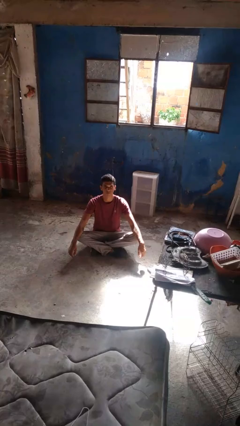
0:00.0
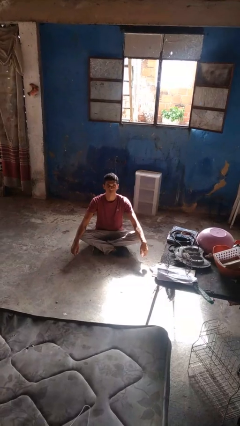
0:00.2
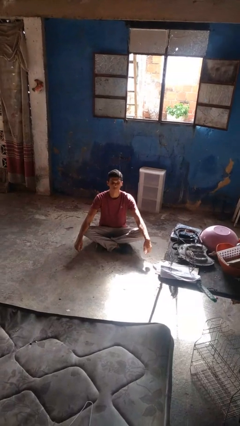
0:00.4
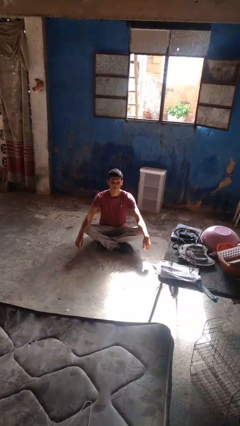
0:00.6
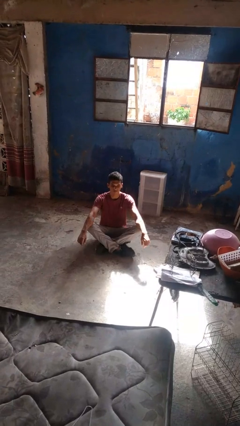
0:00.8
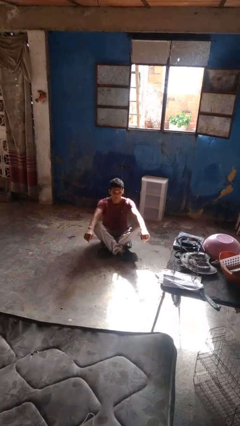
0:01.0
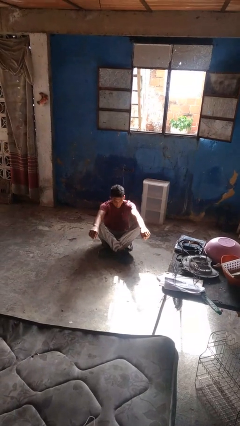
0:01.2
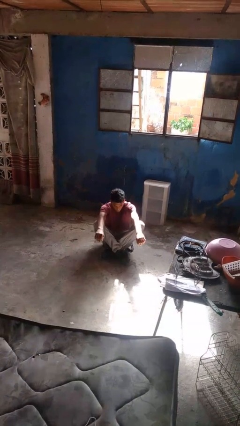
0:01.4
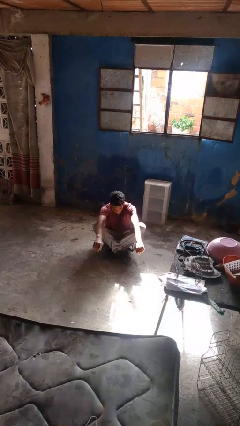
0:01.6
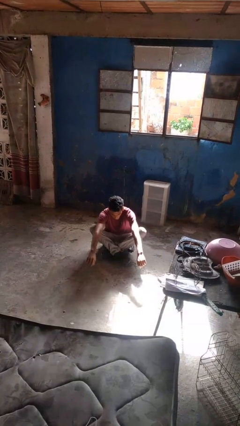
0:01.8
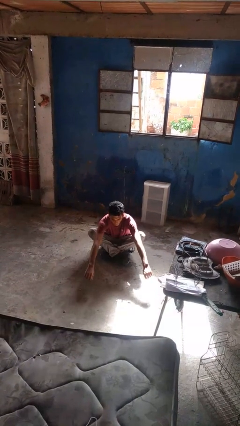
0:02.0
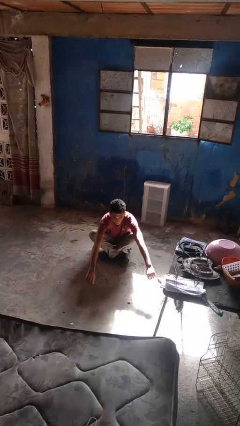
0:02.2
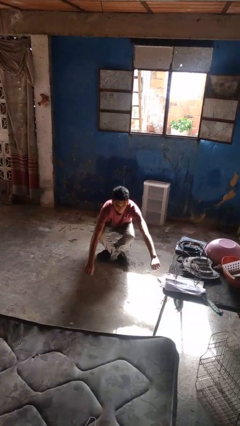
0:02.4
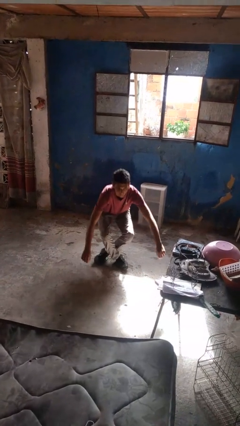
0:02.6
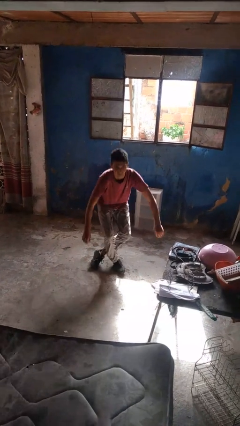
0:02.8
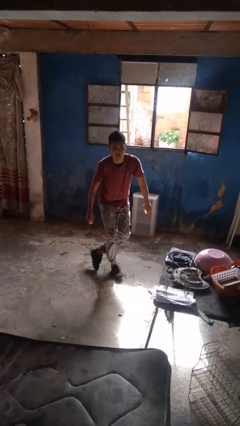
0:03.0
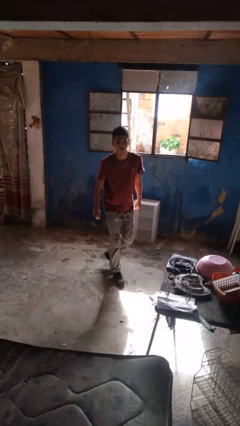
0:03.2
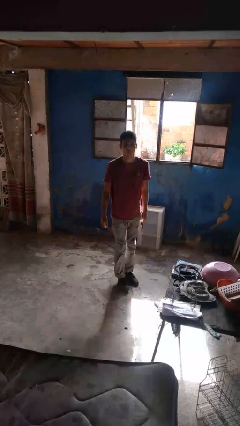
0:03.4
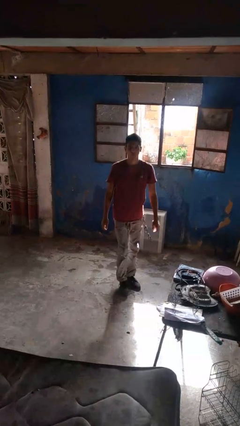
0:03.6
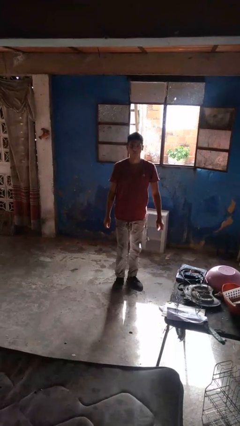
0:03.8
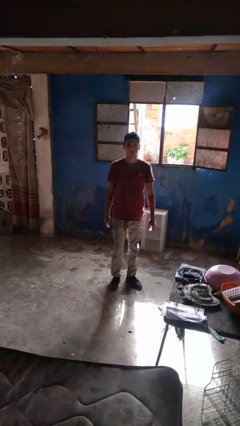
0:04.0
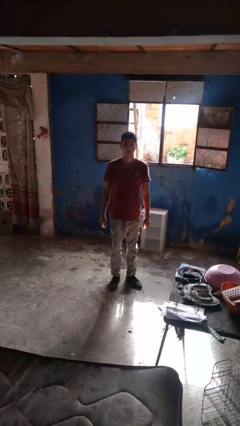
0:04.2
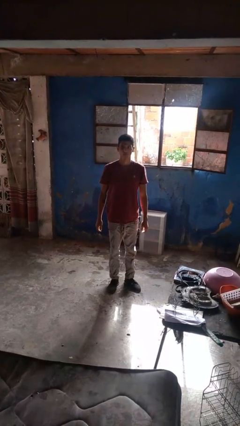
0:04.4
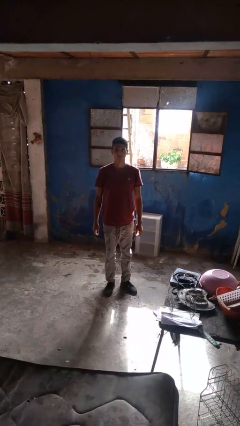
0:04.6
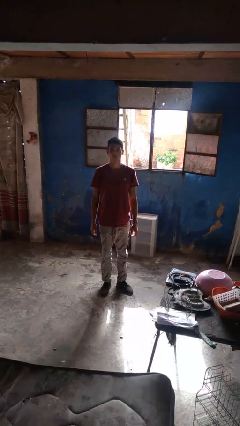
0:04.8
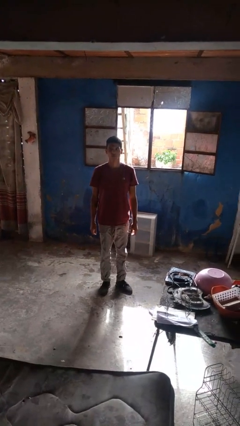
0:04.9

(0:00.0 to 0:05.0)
person stands up from floor

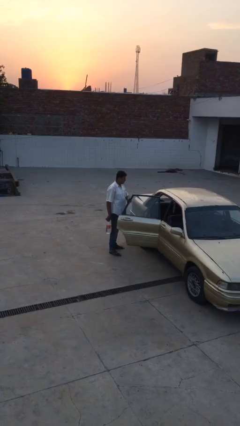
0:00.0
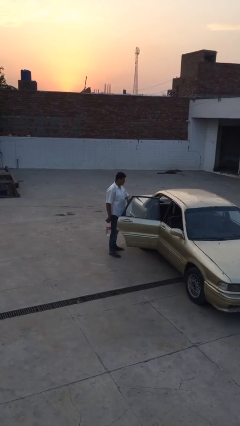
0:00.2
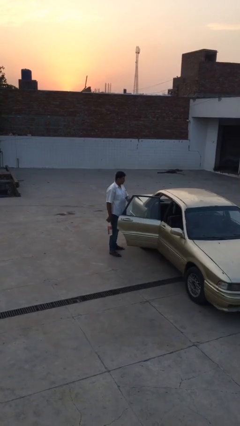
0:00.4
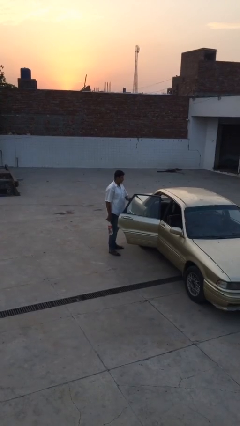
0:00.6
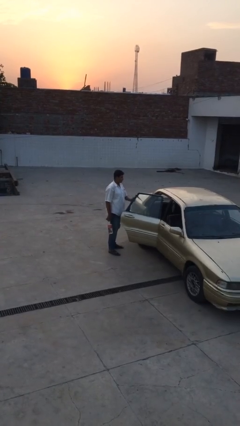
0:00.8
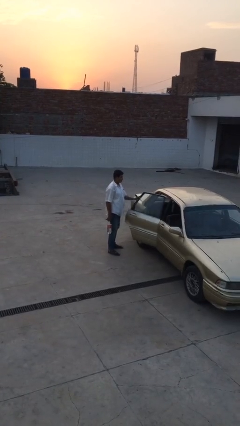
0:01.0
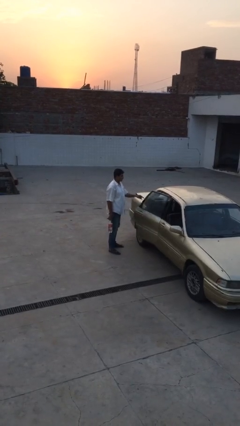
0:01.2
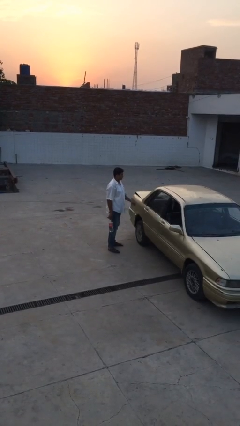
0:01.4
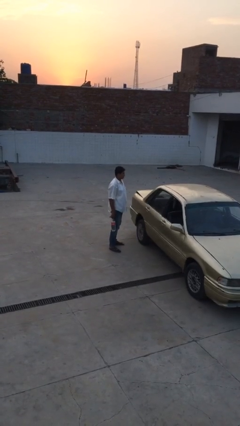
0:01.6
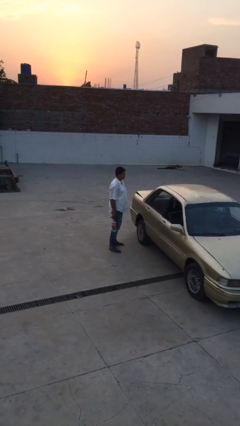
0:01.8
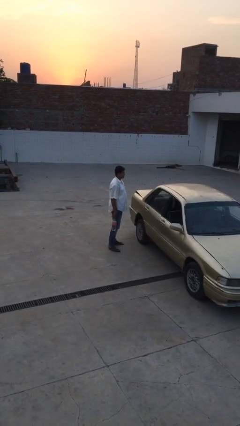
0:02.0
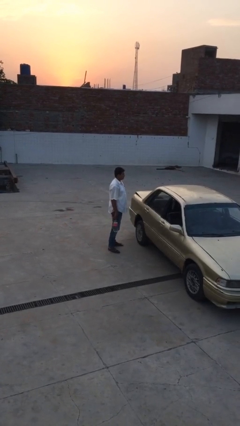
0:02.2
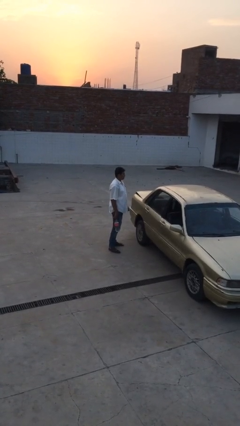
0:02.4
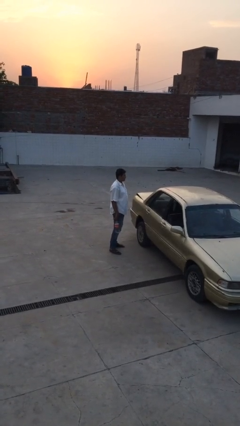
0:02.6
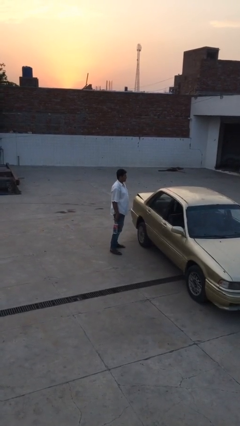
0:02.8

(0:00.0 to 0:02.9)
person closes car door

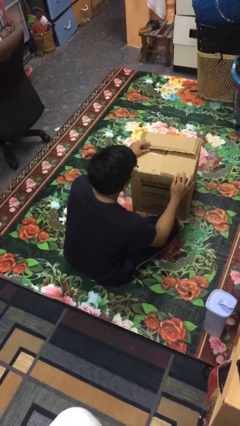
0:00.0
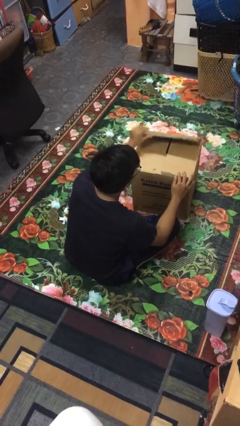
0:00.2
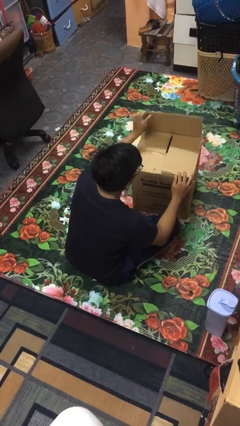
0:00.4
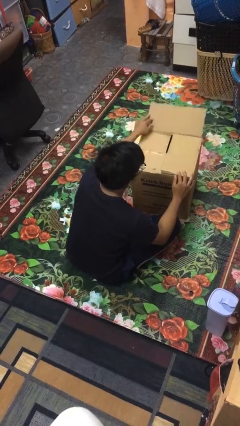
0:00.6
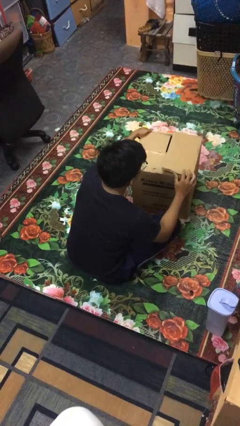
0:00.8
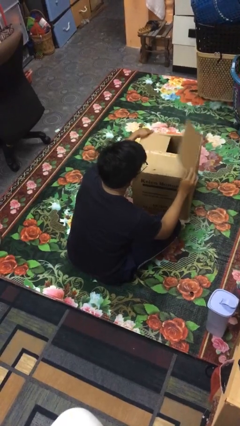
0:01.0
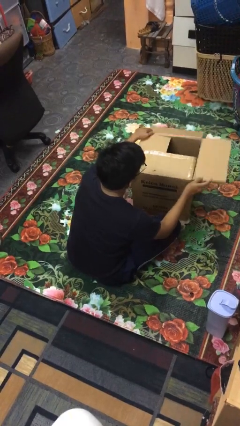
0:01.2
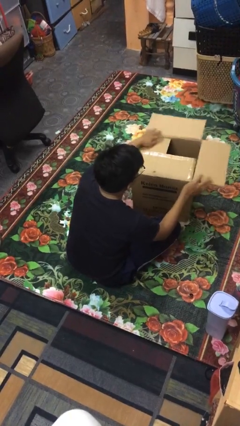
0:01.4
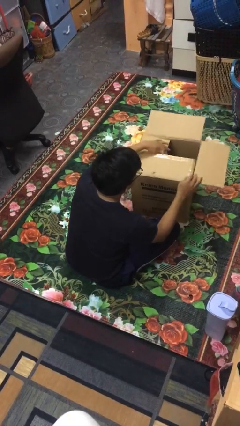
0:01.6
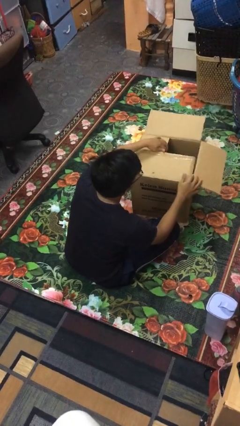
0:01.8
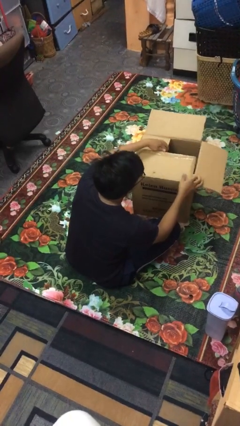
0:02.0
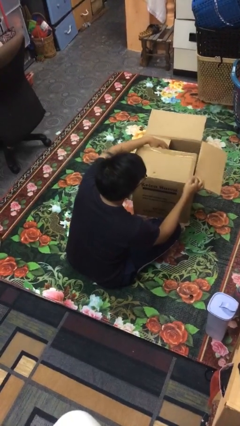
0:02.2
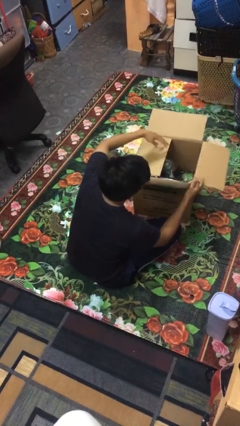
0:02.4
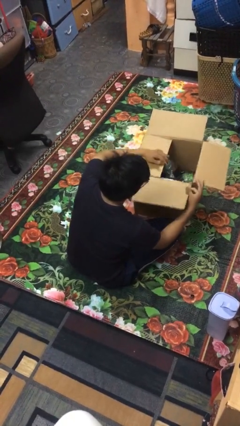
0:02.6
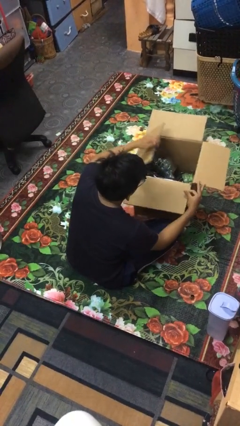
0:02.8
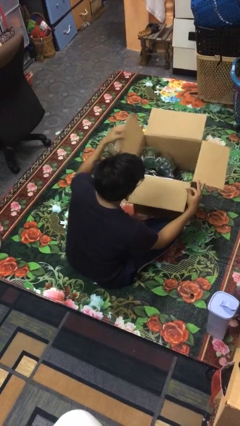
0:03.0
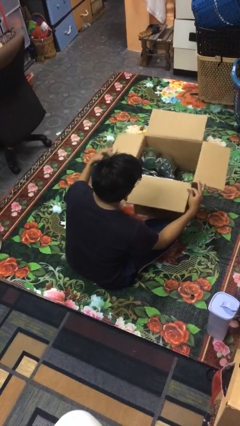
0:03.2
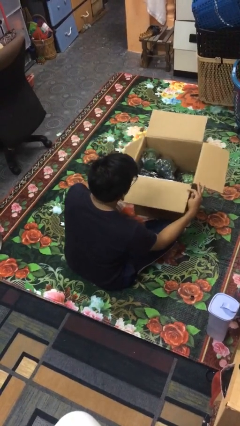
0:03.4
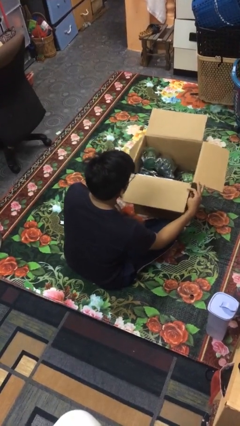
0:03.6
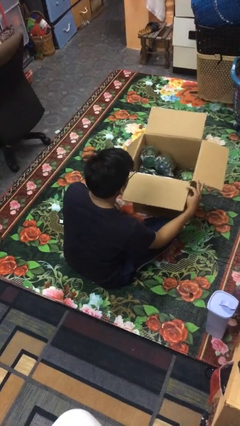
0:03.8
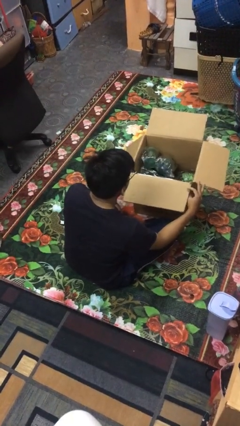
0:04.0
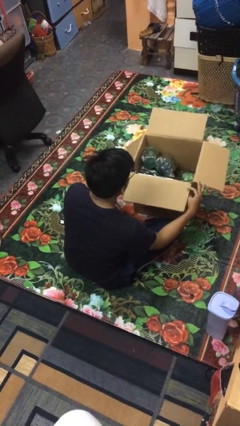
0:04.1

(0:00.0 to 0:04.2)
person opens box

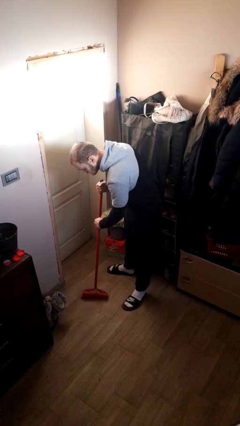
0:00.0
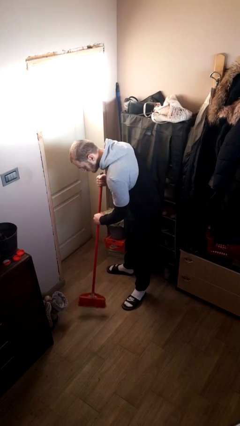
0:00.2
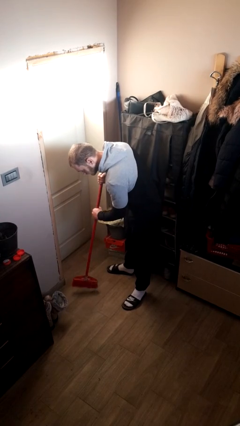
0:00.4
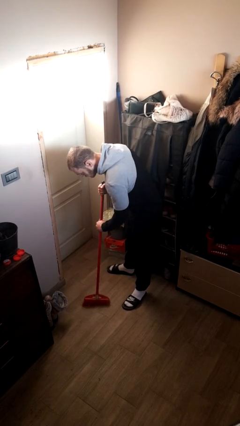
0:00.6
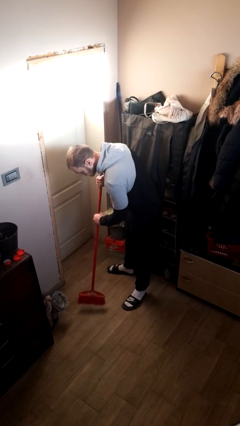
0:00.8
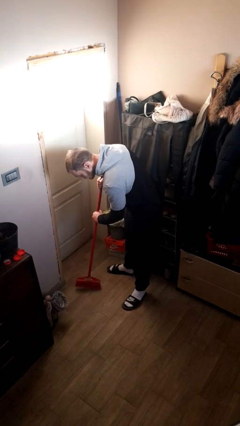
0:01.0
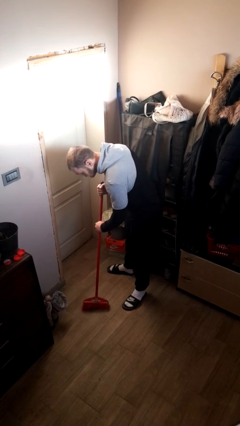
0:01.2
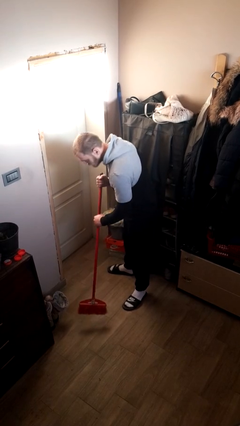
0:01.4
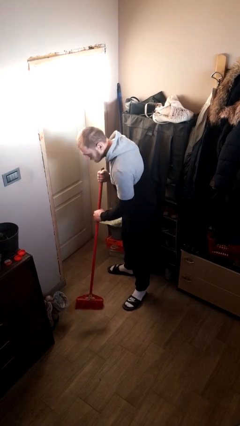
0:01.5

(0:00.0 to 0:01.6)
person sweeps floor

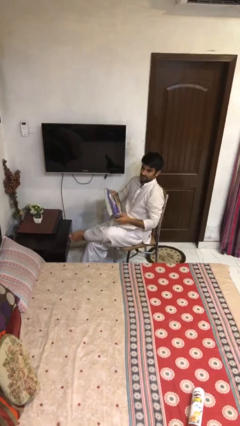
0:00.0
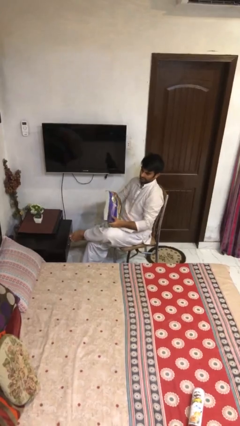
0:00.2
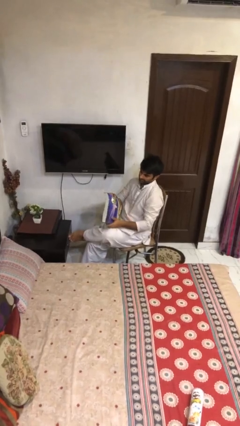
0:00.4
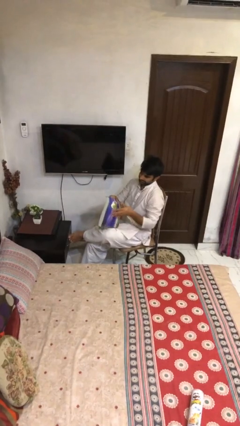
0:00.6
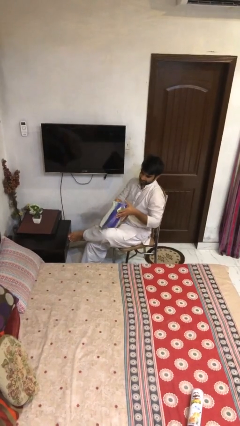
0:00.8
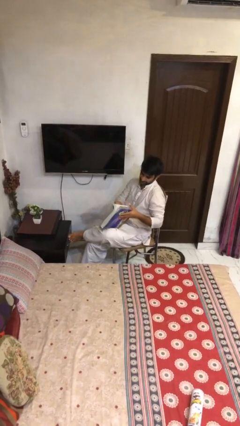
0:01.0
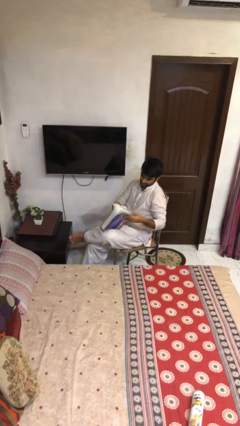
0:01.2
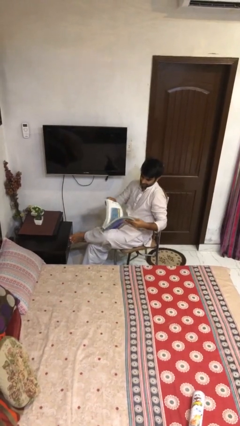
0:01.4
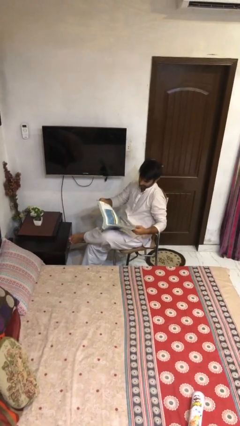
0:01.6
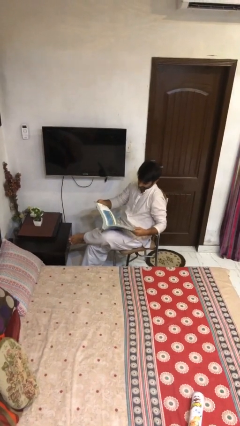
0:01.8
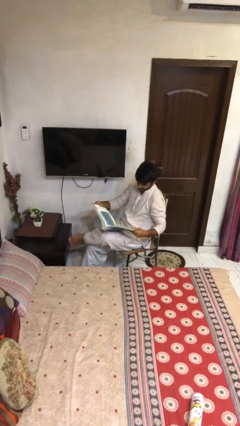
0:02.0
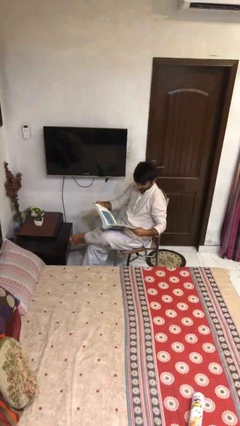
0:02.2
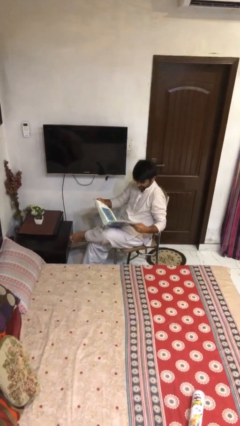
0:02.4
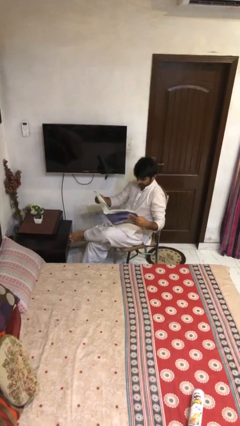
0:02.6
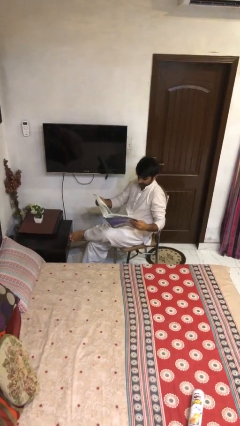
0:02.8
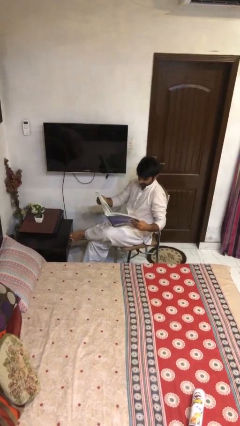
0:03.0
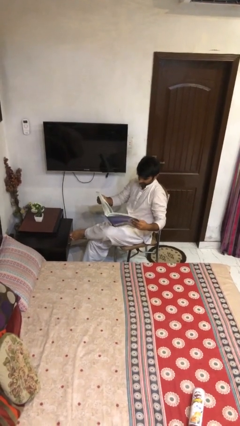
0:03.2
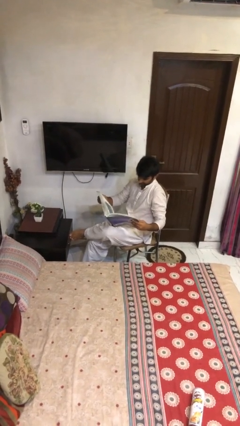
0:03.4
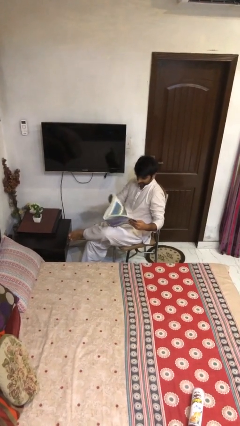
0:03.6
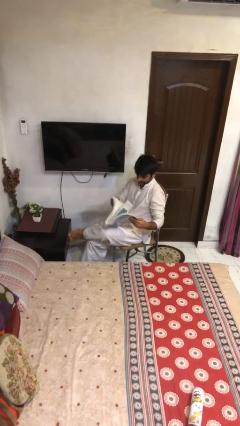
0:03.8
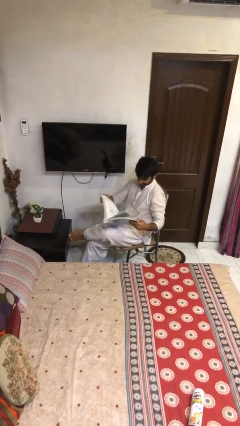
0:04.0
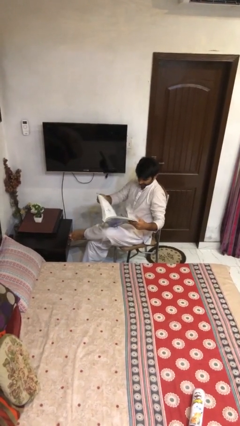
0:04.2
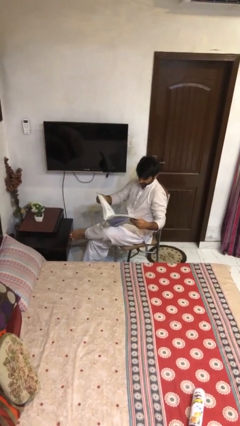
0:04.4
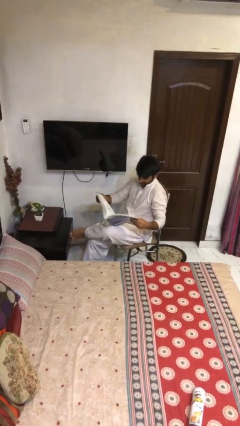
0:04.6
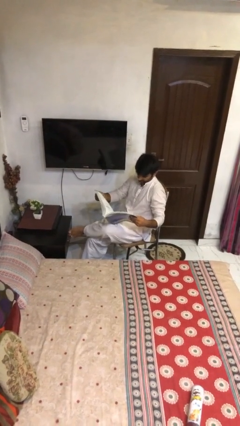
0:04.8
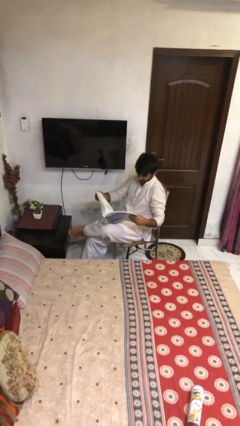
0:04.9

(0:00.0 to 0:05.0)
person reads document
